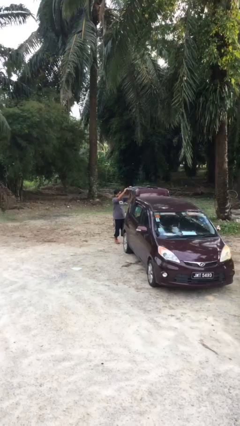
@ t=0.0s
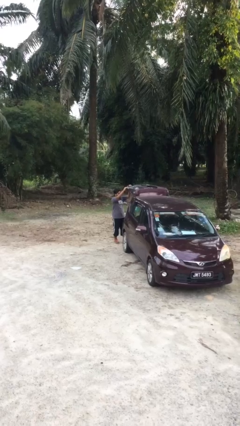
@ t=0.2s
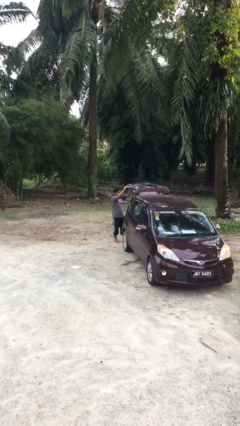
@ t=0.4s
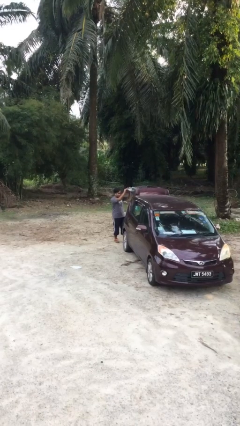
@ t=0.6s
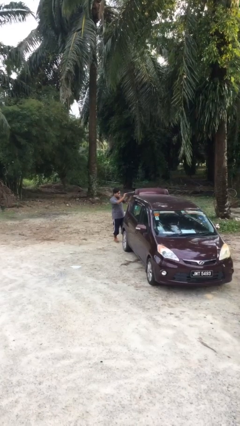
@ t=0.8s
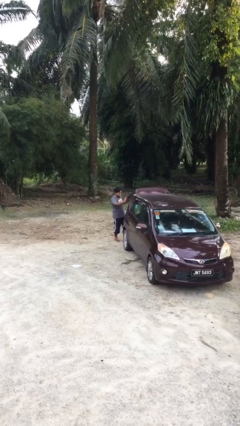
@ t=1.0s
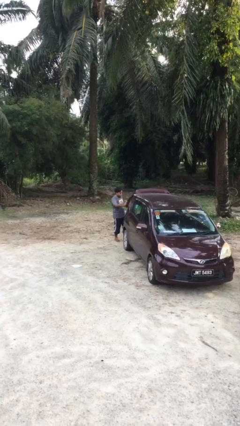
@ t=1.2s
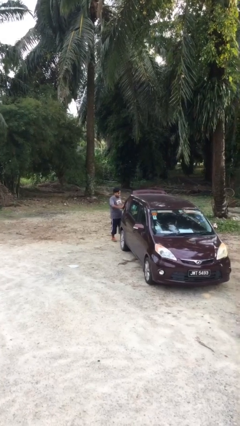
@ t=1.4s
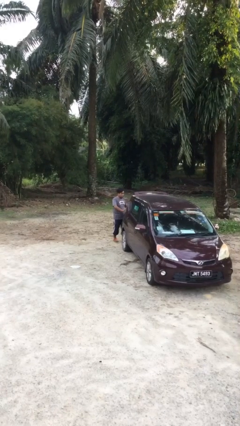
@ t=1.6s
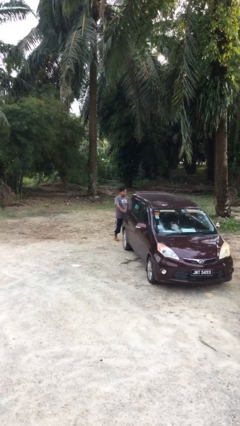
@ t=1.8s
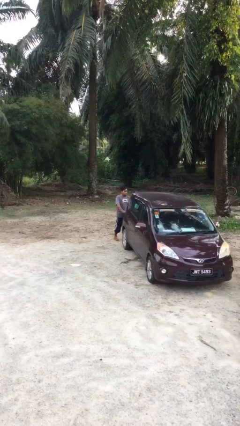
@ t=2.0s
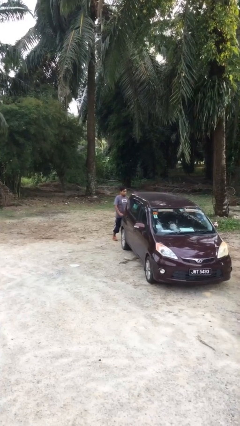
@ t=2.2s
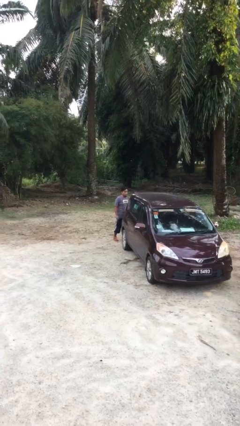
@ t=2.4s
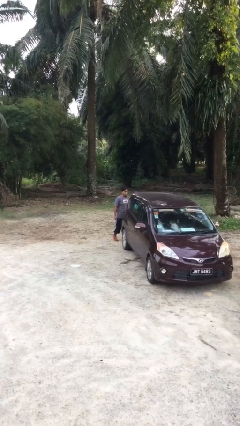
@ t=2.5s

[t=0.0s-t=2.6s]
person closes car trunk

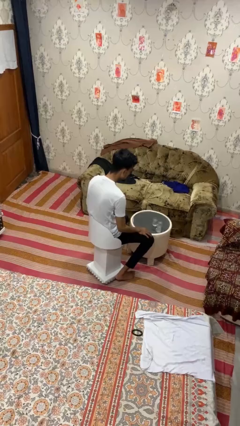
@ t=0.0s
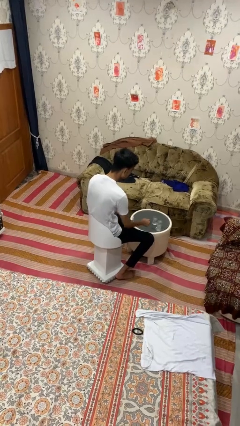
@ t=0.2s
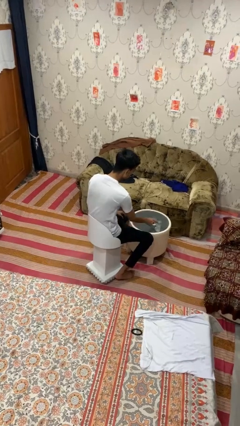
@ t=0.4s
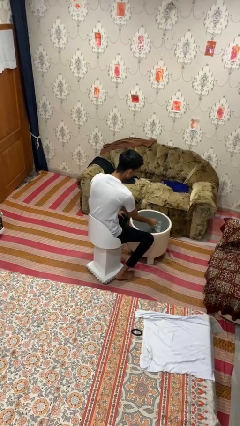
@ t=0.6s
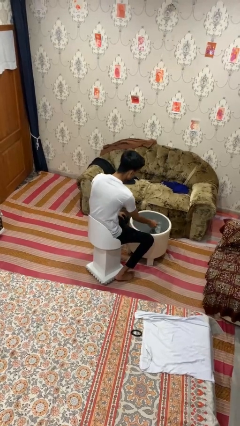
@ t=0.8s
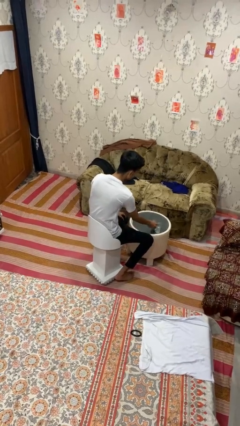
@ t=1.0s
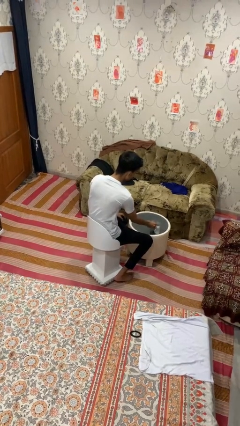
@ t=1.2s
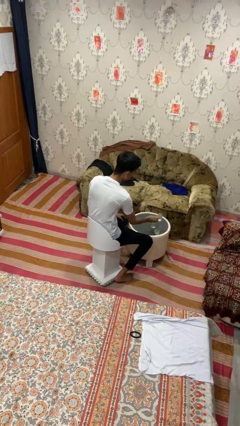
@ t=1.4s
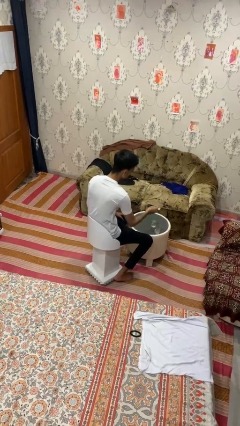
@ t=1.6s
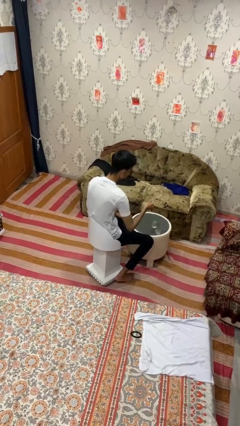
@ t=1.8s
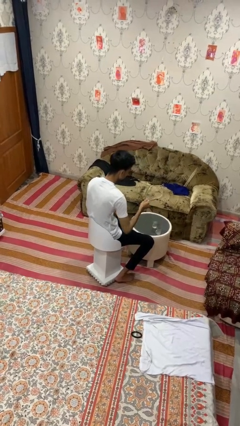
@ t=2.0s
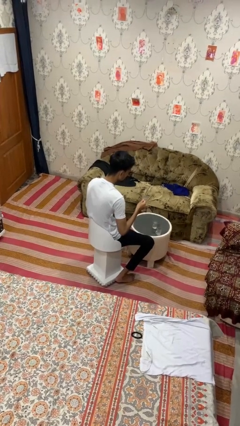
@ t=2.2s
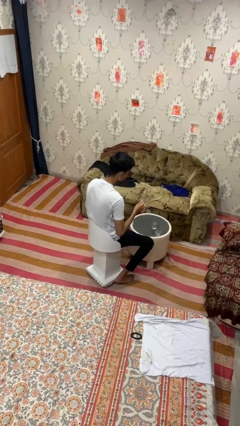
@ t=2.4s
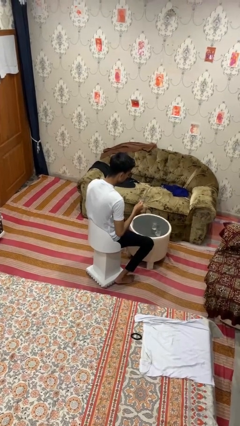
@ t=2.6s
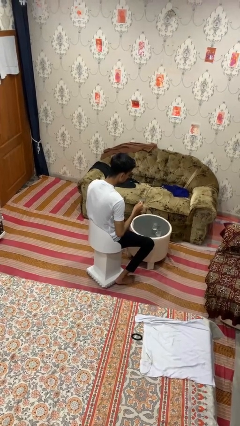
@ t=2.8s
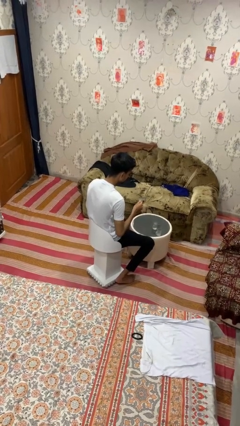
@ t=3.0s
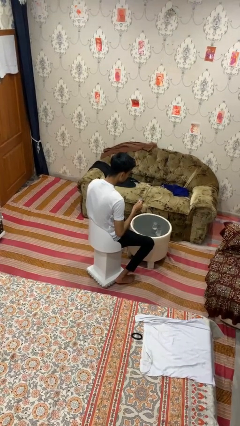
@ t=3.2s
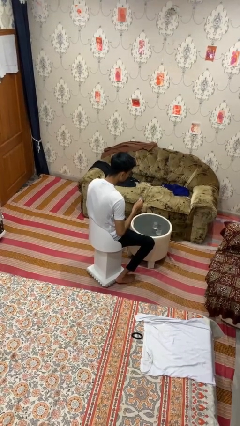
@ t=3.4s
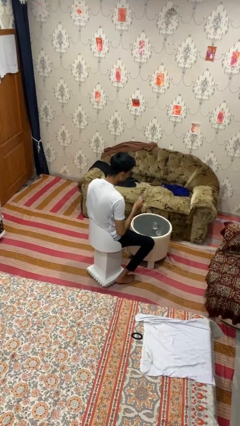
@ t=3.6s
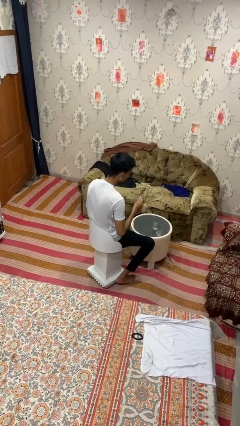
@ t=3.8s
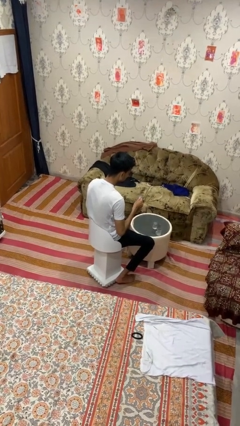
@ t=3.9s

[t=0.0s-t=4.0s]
person picks up object from table

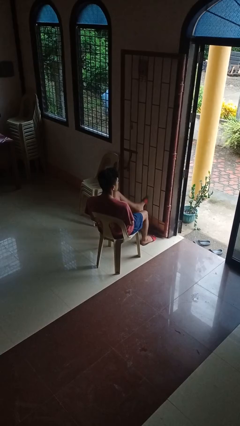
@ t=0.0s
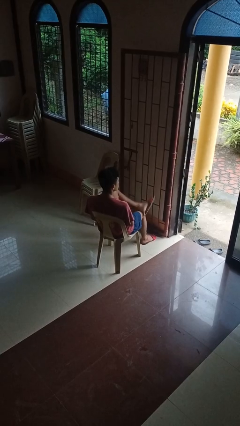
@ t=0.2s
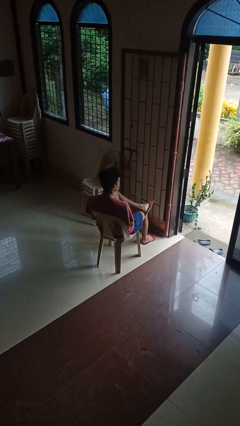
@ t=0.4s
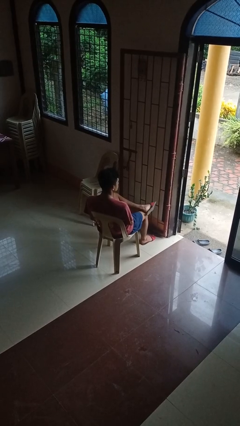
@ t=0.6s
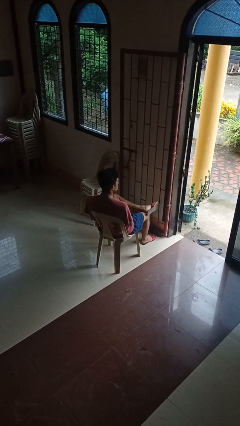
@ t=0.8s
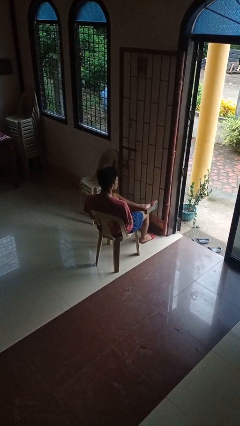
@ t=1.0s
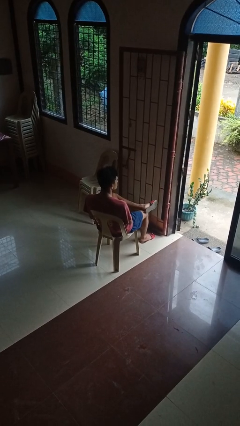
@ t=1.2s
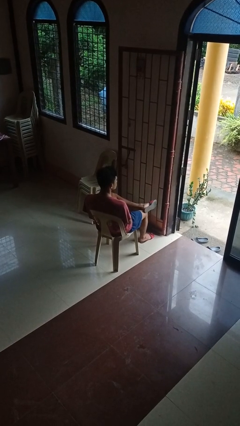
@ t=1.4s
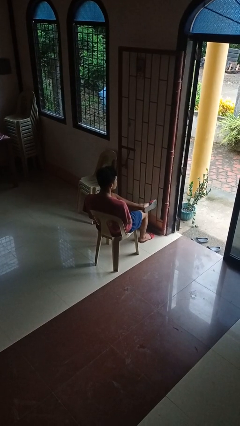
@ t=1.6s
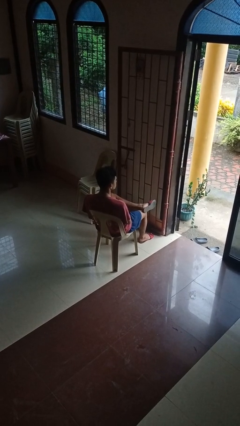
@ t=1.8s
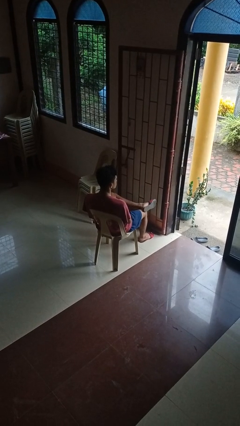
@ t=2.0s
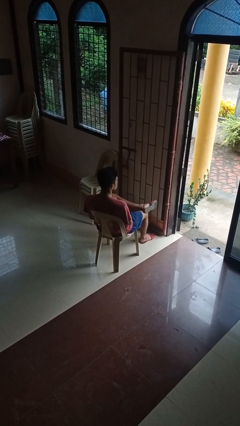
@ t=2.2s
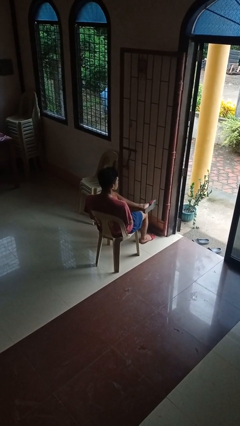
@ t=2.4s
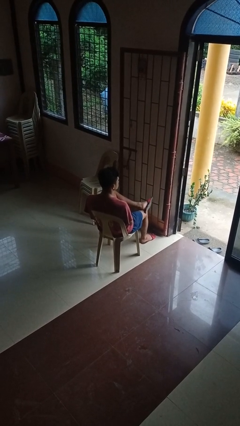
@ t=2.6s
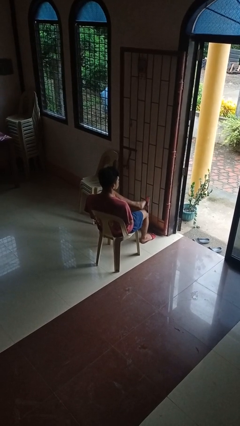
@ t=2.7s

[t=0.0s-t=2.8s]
person crosses legs

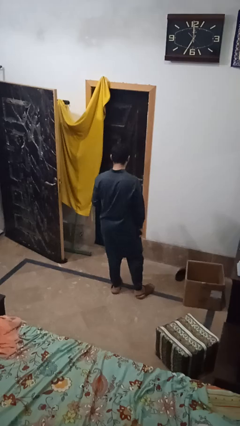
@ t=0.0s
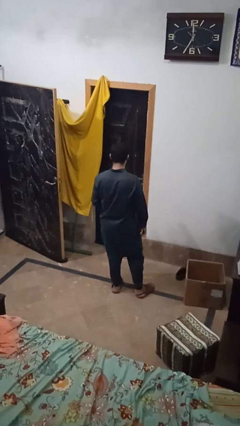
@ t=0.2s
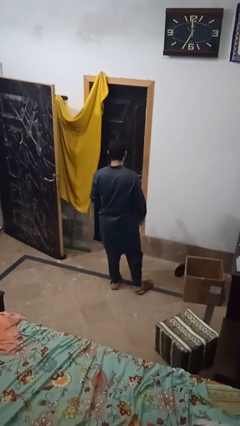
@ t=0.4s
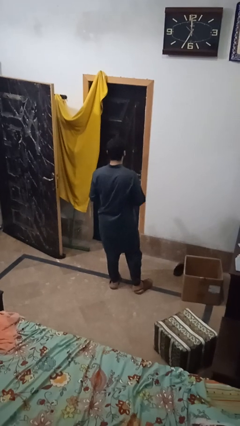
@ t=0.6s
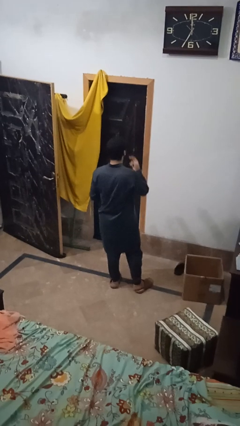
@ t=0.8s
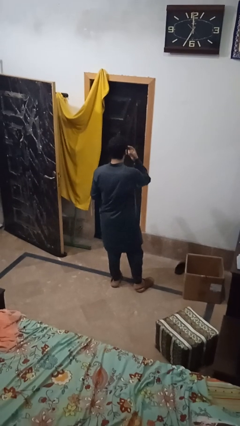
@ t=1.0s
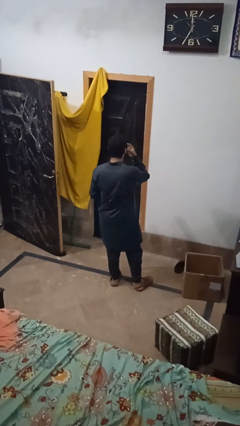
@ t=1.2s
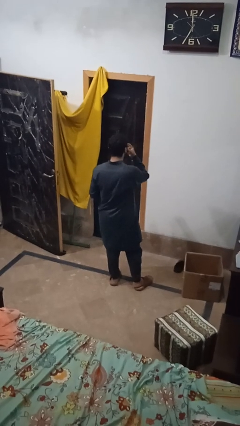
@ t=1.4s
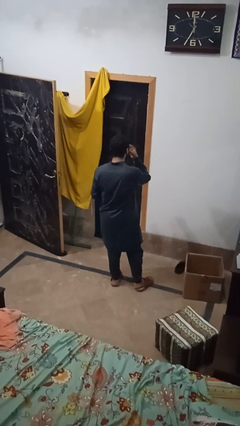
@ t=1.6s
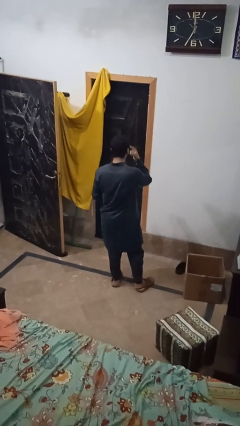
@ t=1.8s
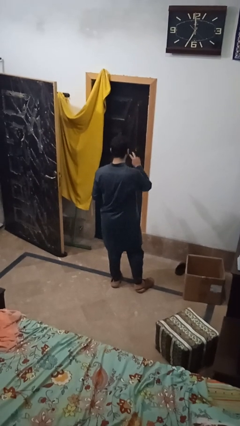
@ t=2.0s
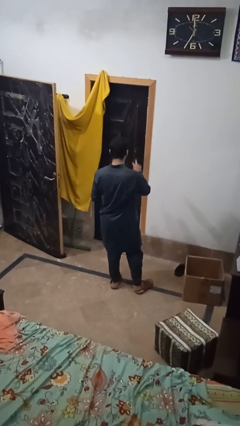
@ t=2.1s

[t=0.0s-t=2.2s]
person gestures watch closely

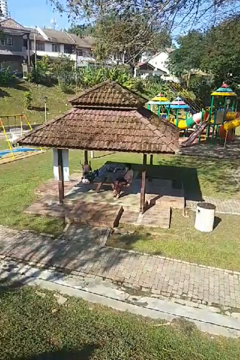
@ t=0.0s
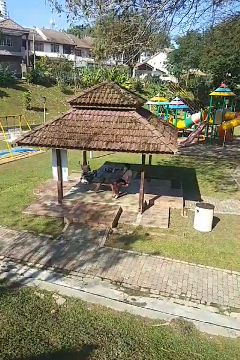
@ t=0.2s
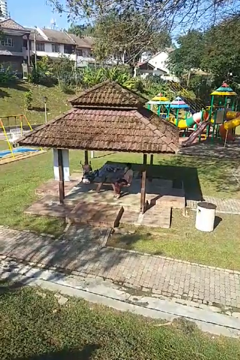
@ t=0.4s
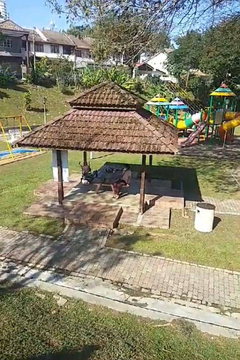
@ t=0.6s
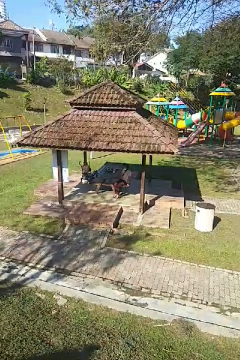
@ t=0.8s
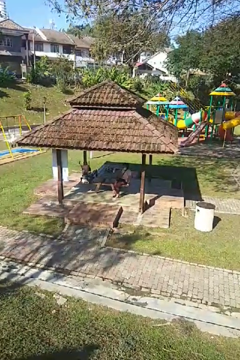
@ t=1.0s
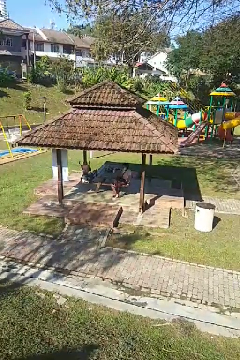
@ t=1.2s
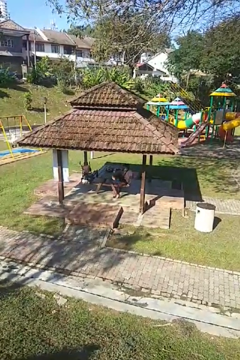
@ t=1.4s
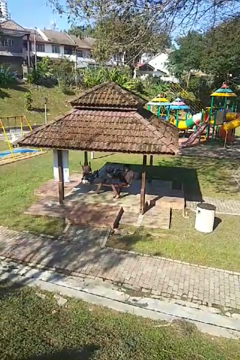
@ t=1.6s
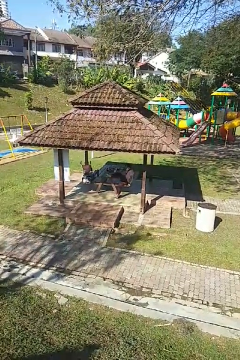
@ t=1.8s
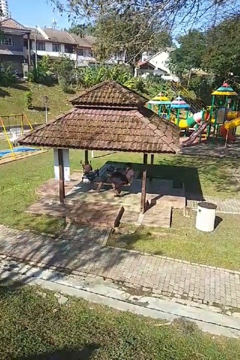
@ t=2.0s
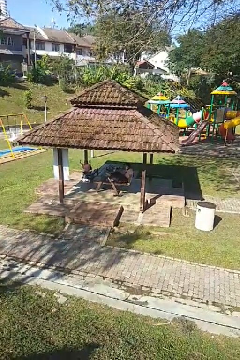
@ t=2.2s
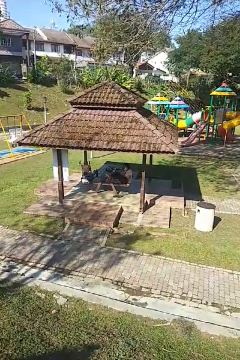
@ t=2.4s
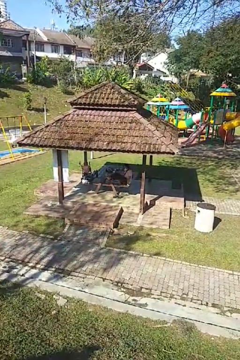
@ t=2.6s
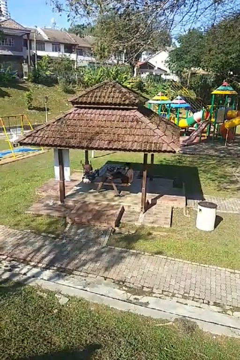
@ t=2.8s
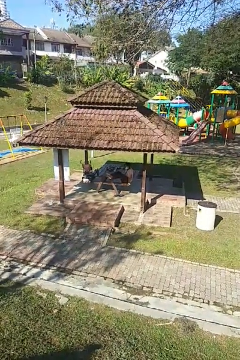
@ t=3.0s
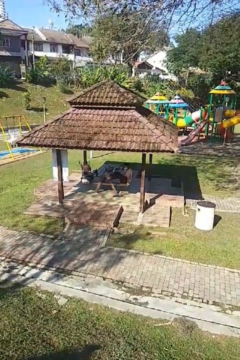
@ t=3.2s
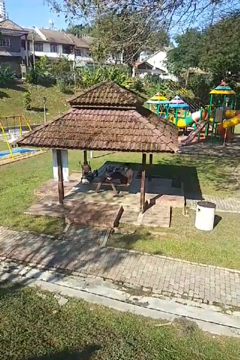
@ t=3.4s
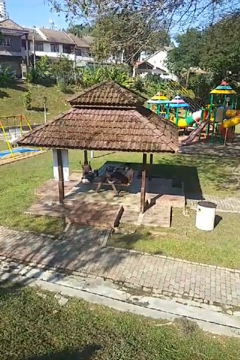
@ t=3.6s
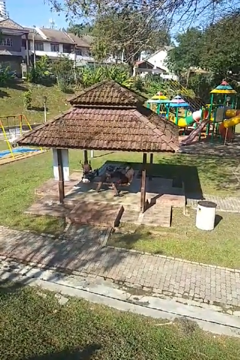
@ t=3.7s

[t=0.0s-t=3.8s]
person puts feet up

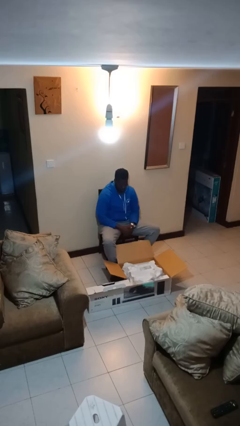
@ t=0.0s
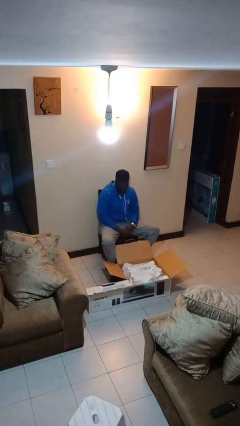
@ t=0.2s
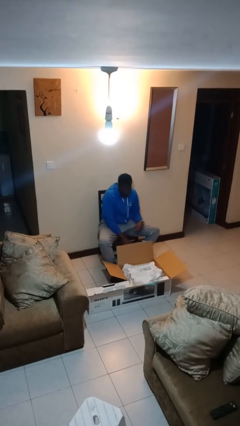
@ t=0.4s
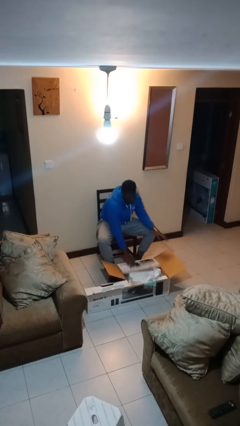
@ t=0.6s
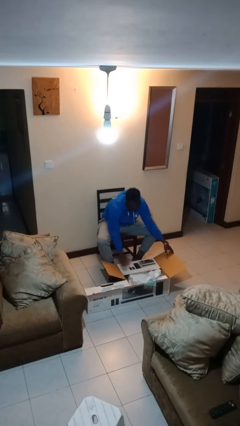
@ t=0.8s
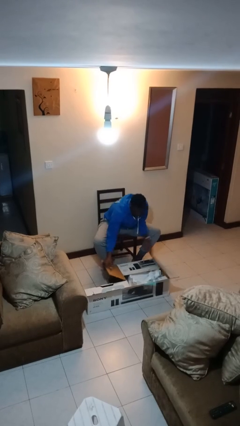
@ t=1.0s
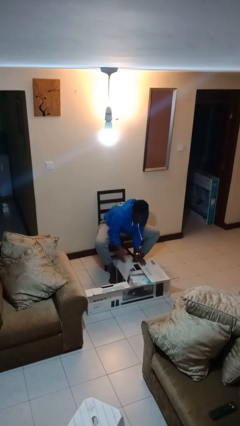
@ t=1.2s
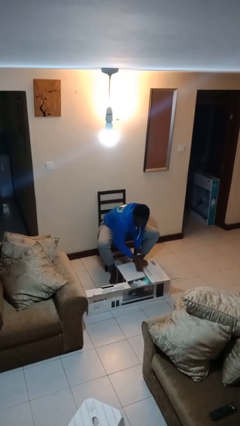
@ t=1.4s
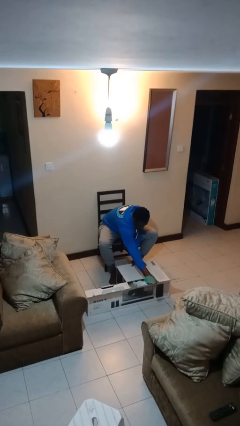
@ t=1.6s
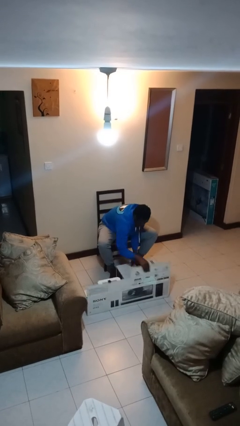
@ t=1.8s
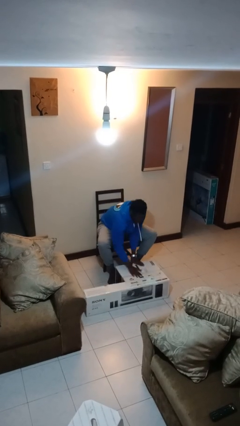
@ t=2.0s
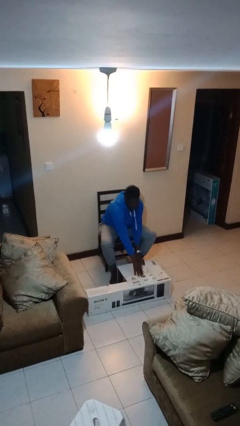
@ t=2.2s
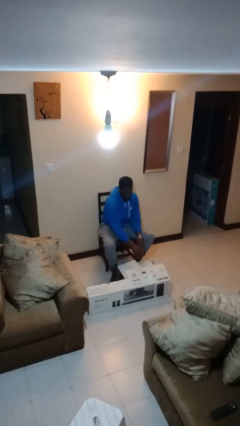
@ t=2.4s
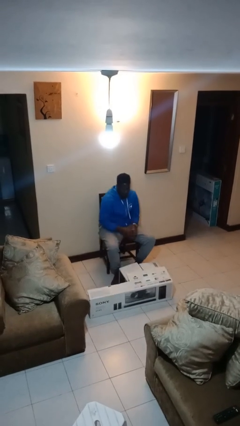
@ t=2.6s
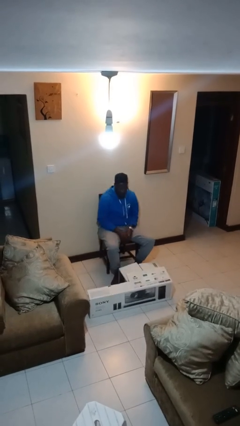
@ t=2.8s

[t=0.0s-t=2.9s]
person closes box
